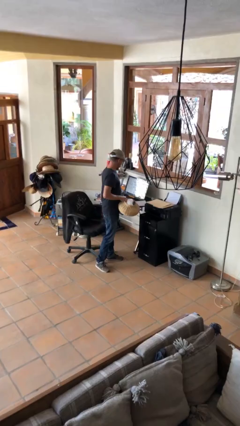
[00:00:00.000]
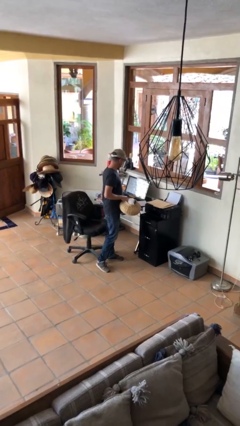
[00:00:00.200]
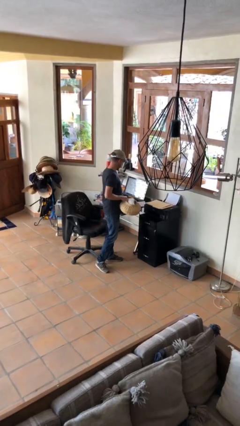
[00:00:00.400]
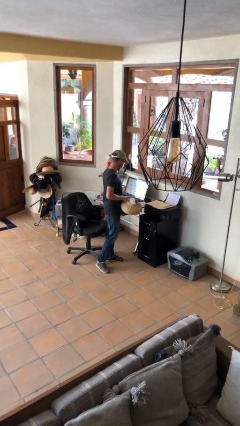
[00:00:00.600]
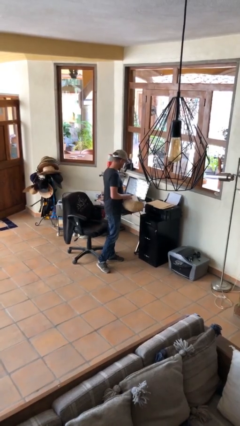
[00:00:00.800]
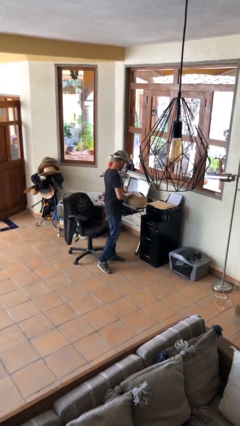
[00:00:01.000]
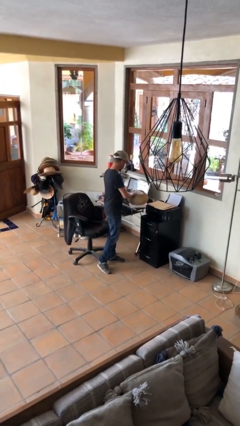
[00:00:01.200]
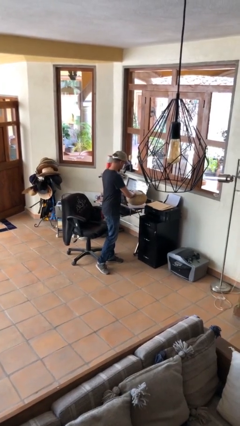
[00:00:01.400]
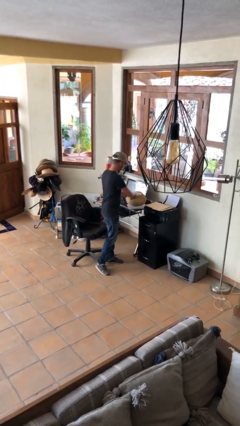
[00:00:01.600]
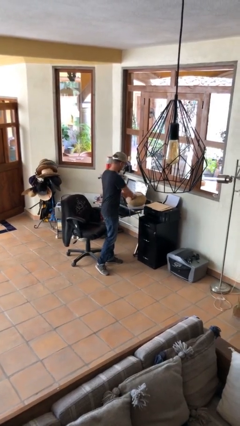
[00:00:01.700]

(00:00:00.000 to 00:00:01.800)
person puts down object on table

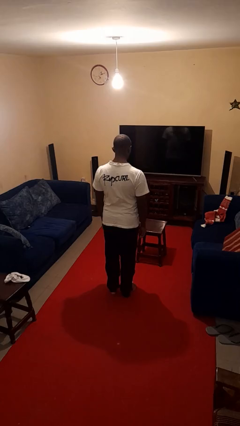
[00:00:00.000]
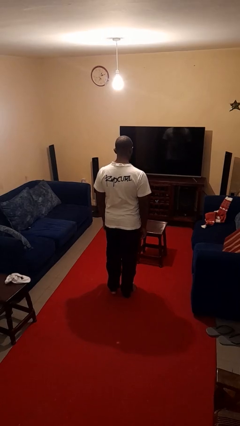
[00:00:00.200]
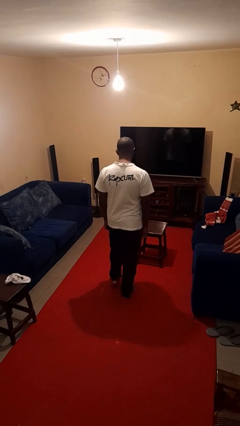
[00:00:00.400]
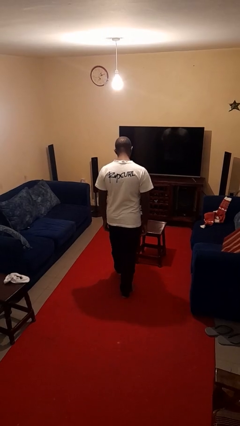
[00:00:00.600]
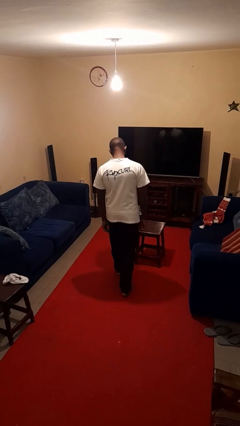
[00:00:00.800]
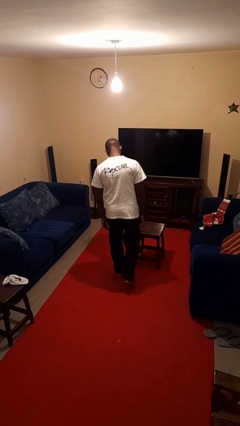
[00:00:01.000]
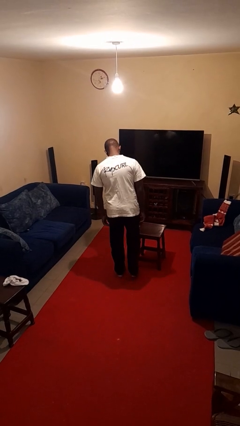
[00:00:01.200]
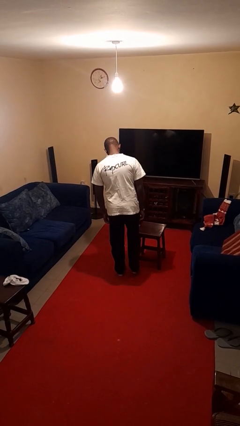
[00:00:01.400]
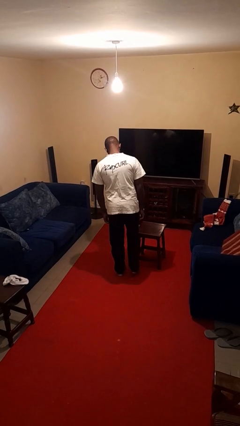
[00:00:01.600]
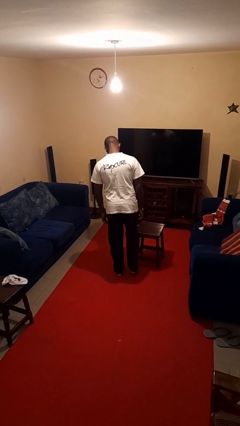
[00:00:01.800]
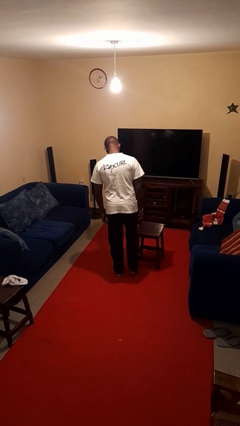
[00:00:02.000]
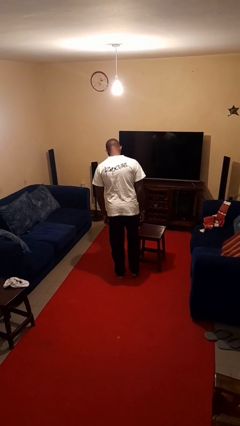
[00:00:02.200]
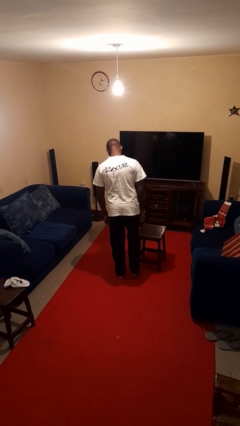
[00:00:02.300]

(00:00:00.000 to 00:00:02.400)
person stubs toe

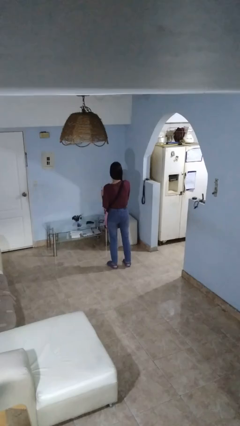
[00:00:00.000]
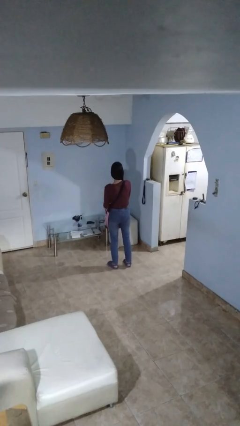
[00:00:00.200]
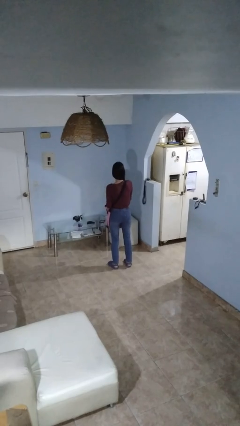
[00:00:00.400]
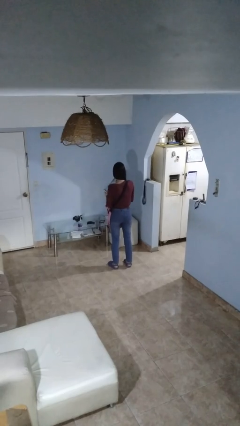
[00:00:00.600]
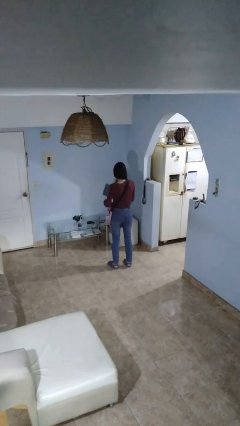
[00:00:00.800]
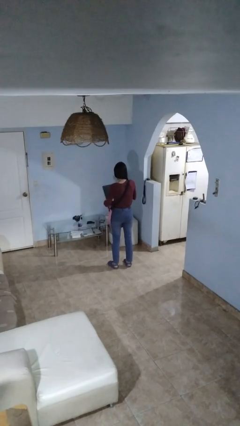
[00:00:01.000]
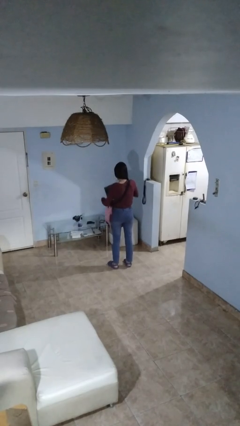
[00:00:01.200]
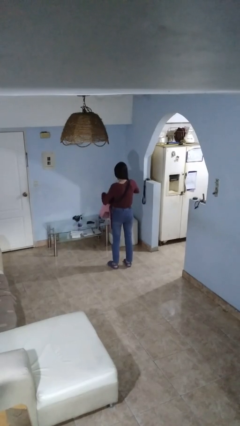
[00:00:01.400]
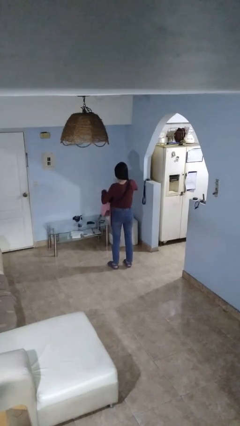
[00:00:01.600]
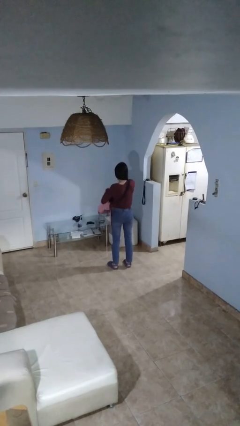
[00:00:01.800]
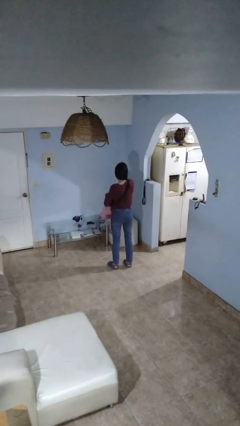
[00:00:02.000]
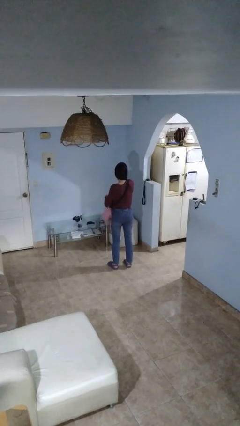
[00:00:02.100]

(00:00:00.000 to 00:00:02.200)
person puts object into backpack

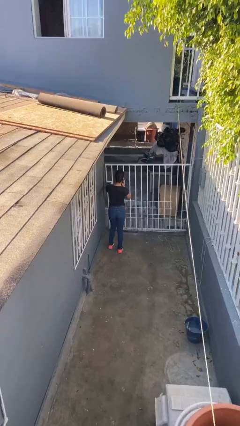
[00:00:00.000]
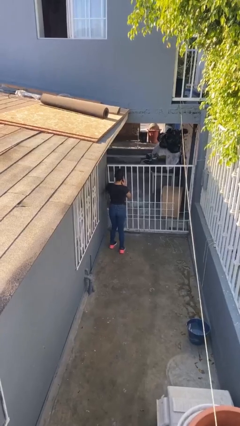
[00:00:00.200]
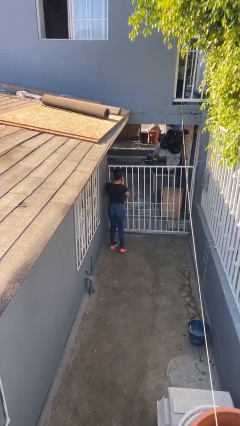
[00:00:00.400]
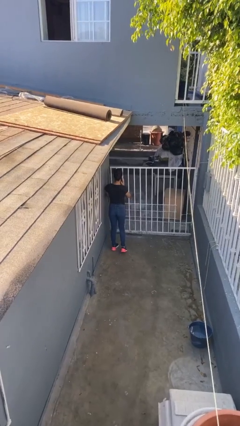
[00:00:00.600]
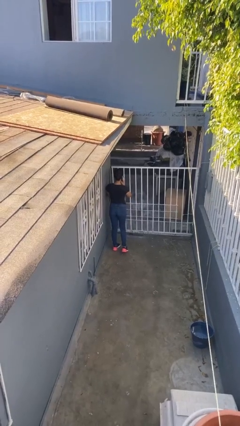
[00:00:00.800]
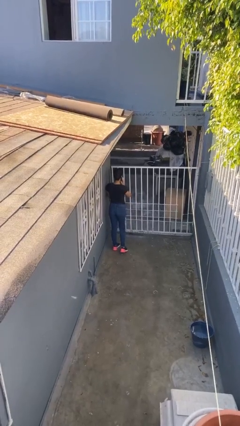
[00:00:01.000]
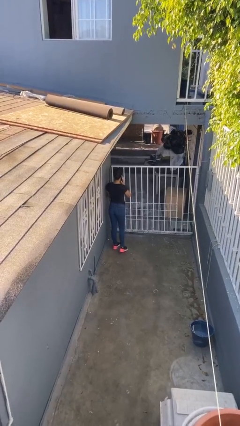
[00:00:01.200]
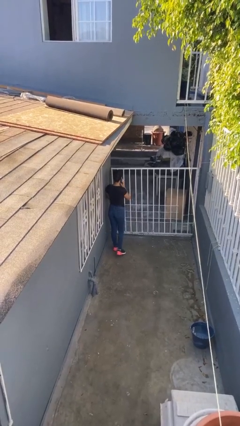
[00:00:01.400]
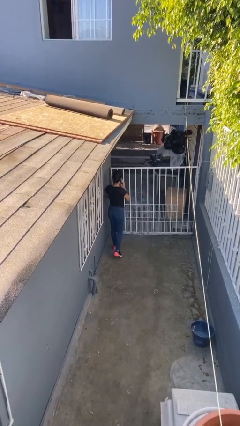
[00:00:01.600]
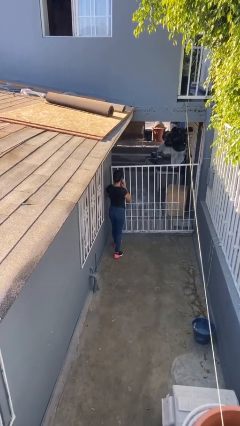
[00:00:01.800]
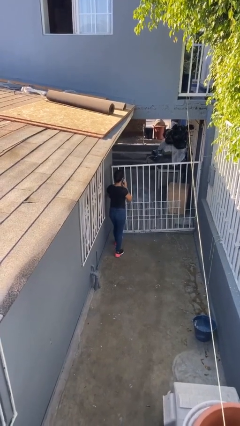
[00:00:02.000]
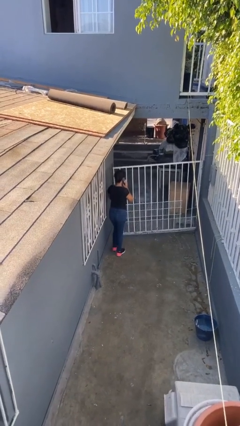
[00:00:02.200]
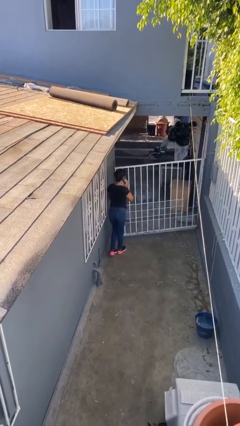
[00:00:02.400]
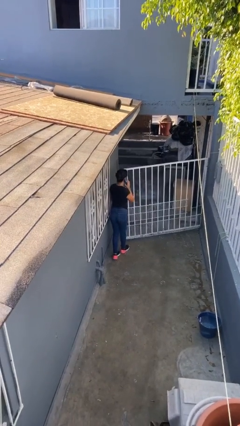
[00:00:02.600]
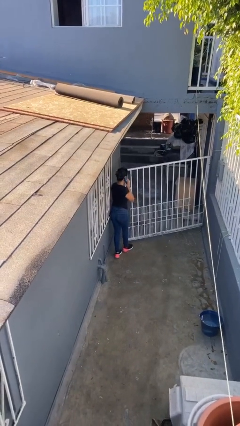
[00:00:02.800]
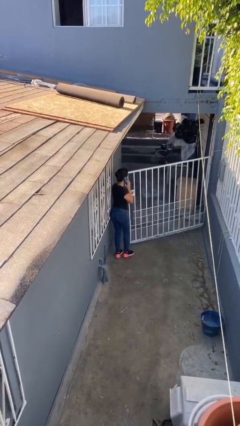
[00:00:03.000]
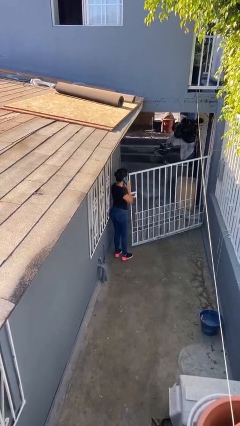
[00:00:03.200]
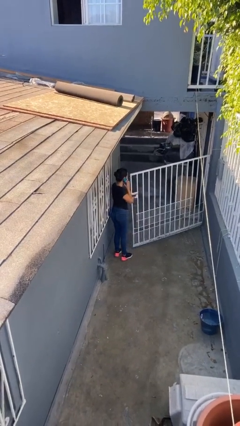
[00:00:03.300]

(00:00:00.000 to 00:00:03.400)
person opens facility door

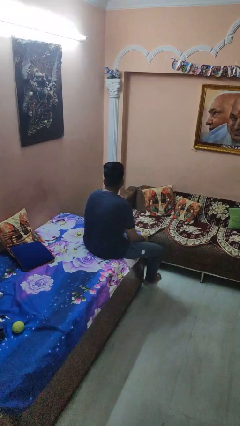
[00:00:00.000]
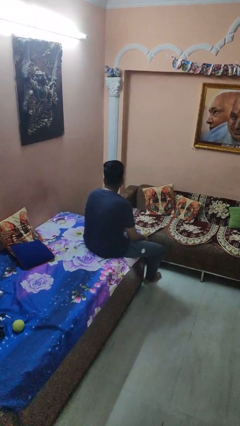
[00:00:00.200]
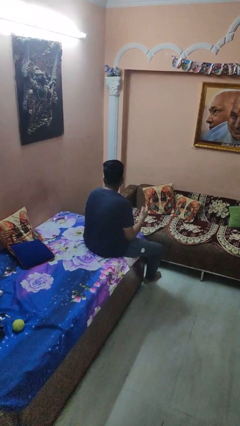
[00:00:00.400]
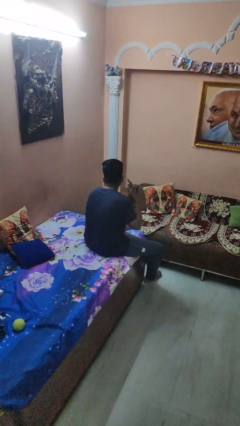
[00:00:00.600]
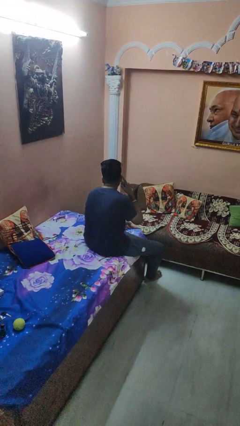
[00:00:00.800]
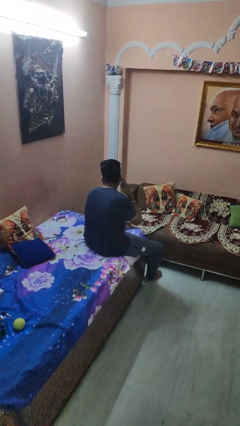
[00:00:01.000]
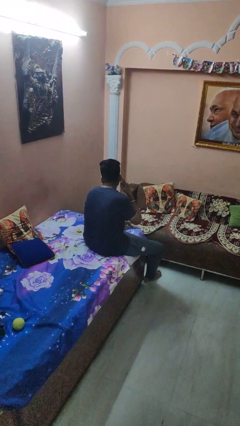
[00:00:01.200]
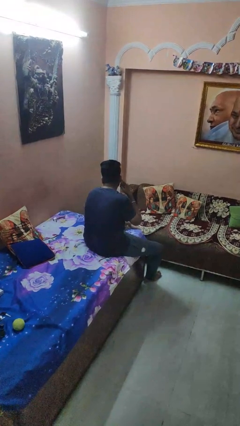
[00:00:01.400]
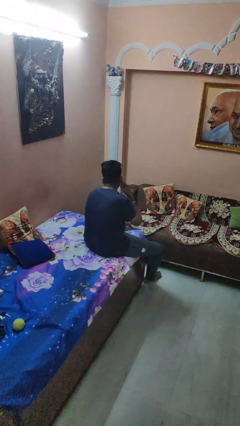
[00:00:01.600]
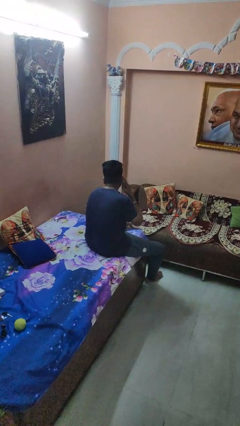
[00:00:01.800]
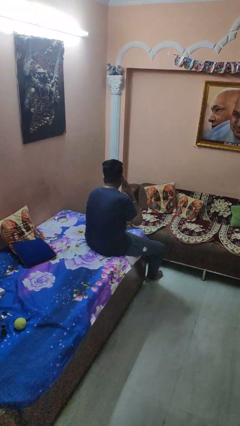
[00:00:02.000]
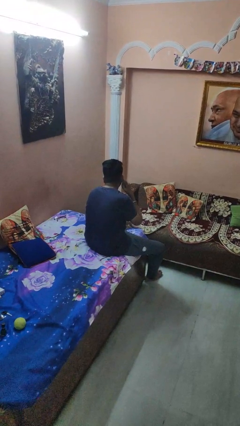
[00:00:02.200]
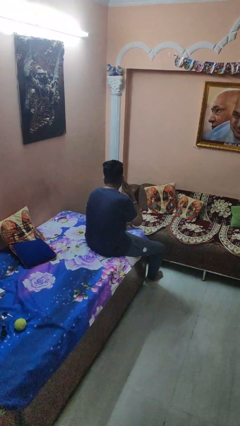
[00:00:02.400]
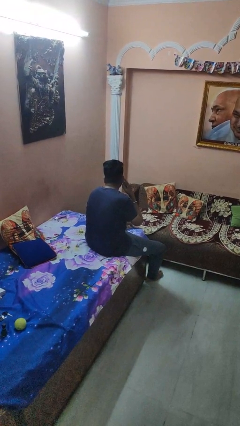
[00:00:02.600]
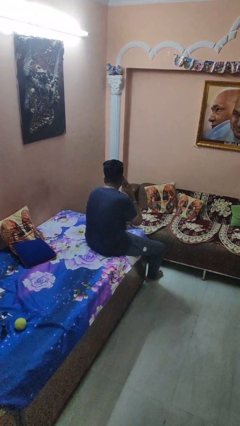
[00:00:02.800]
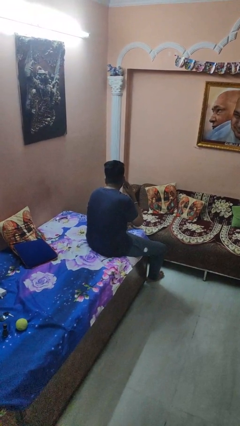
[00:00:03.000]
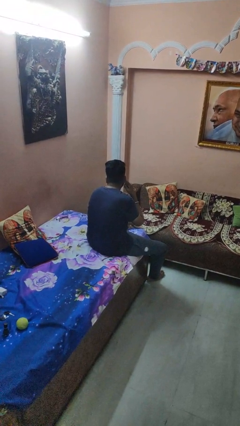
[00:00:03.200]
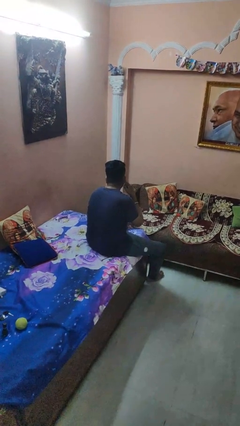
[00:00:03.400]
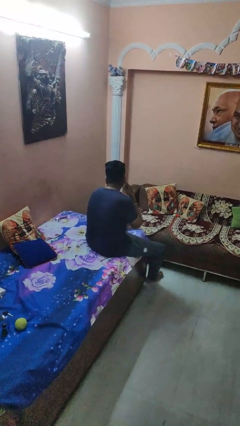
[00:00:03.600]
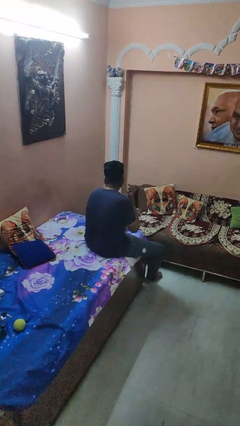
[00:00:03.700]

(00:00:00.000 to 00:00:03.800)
person gestures listen closely

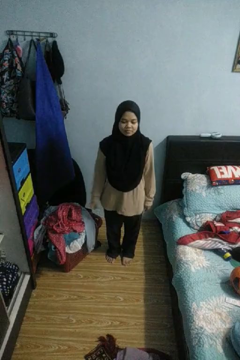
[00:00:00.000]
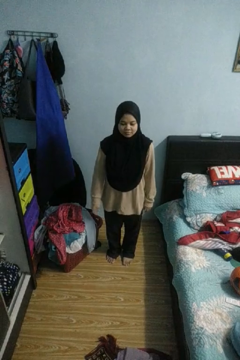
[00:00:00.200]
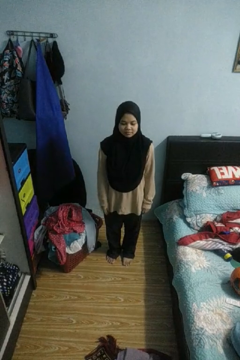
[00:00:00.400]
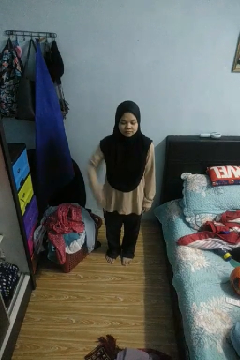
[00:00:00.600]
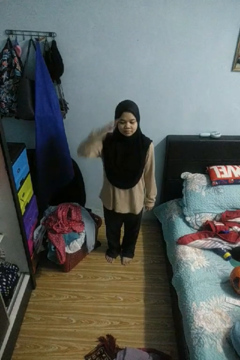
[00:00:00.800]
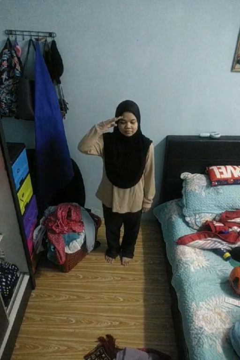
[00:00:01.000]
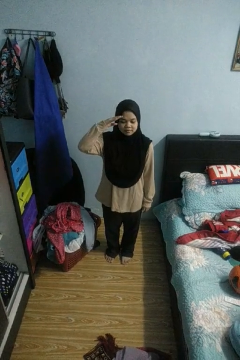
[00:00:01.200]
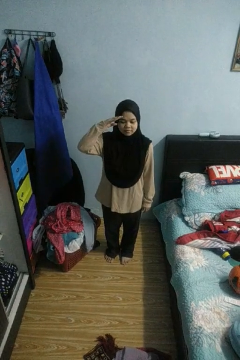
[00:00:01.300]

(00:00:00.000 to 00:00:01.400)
person salutes

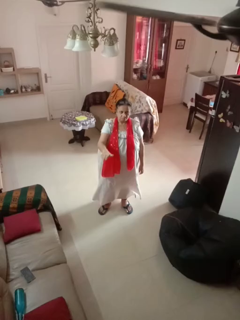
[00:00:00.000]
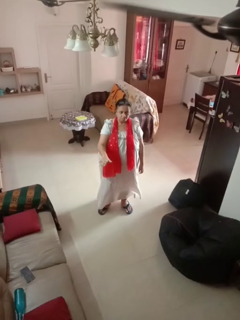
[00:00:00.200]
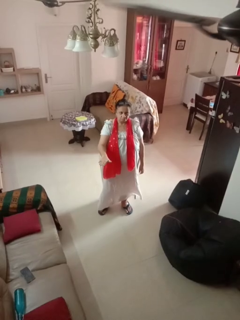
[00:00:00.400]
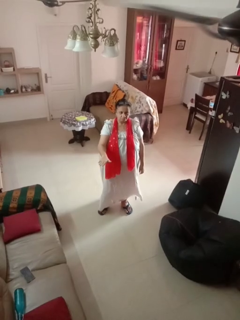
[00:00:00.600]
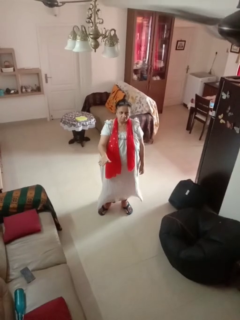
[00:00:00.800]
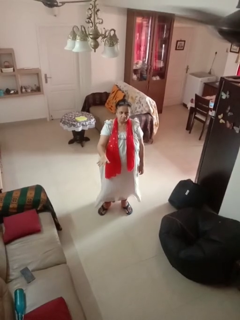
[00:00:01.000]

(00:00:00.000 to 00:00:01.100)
person gestures swipe down

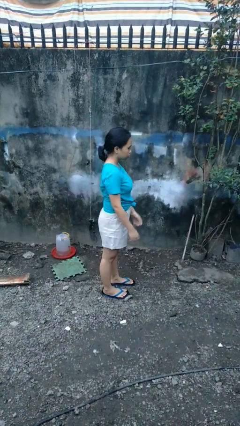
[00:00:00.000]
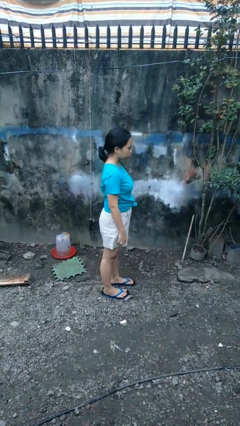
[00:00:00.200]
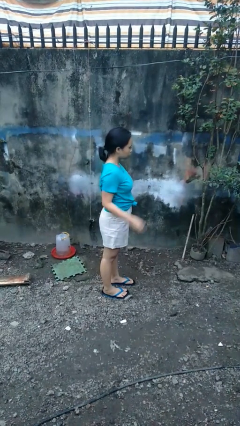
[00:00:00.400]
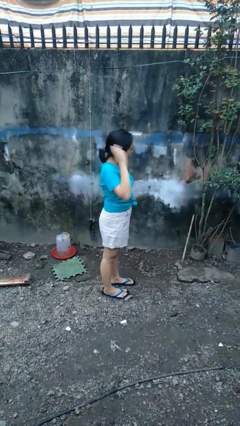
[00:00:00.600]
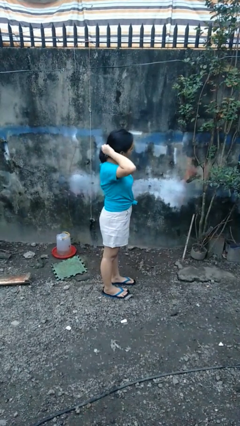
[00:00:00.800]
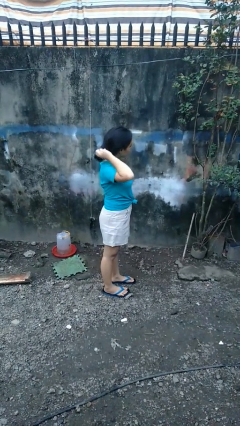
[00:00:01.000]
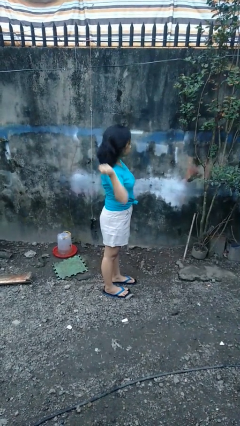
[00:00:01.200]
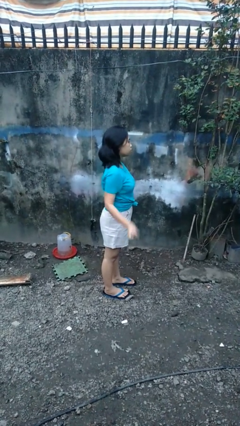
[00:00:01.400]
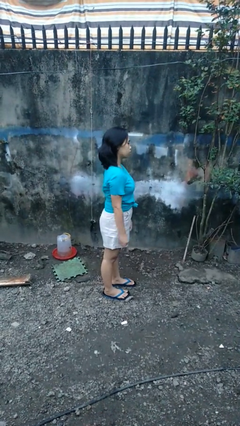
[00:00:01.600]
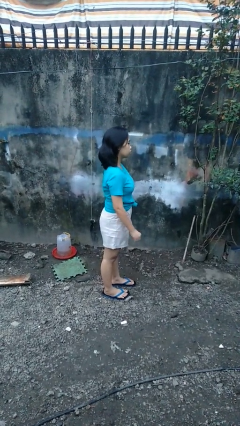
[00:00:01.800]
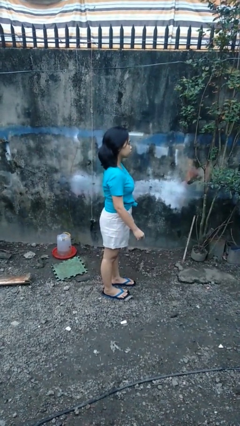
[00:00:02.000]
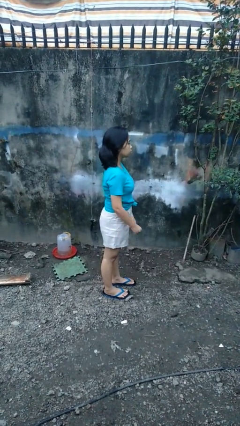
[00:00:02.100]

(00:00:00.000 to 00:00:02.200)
person takes off hairtie
